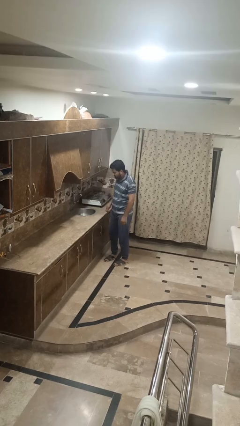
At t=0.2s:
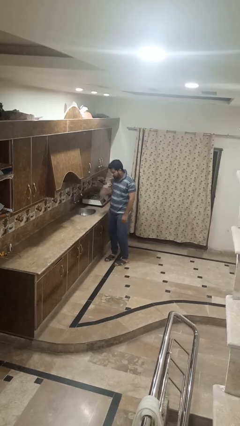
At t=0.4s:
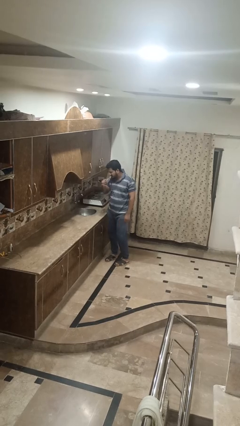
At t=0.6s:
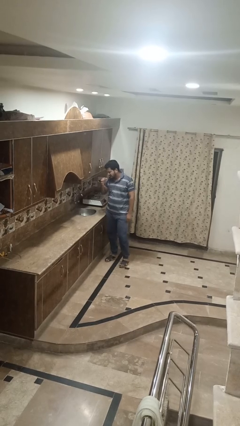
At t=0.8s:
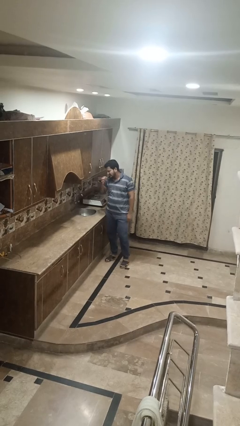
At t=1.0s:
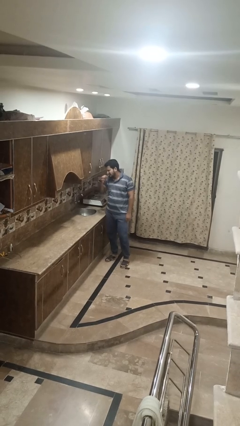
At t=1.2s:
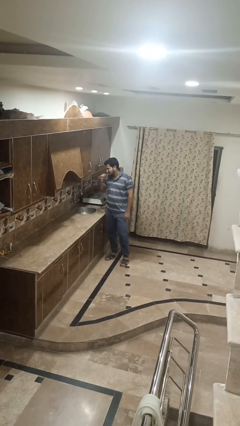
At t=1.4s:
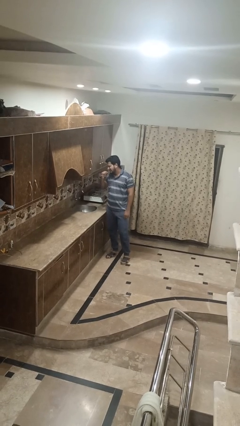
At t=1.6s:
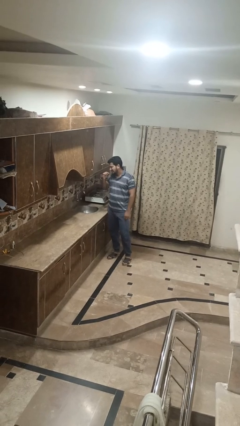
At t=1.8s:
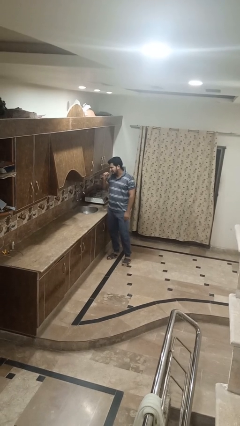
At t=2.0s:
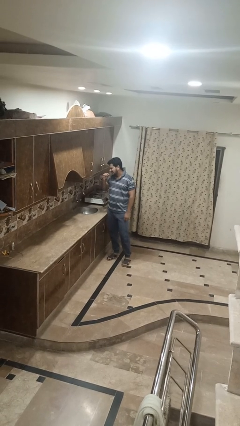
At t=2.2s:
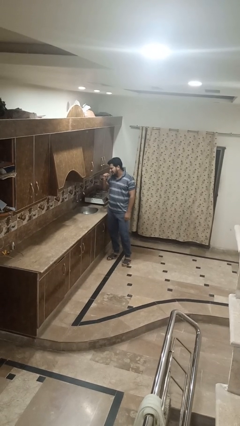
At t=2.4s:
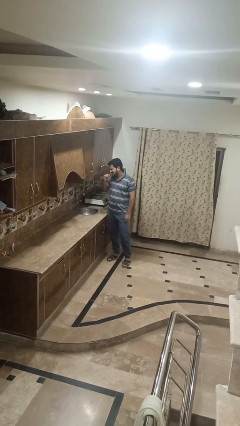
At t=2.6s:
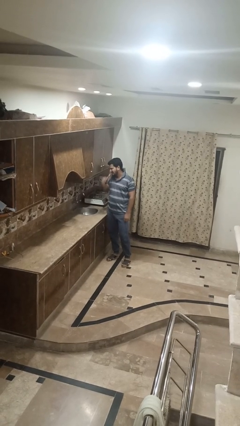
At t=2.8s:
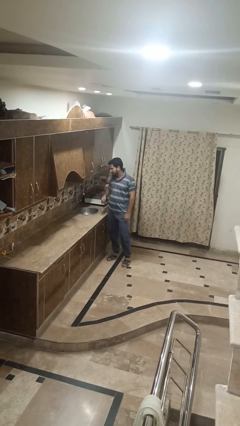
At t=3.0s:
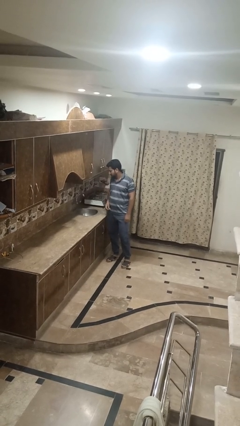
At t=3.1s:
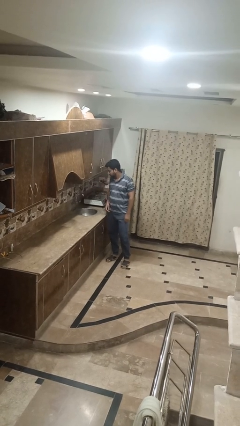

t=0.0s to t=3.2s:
person brushes teeth

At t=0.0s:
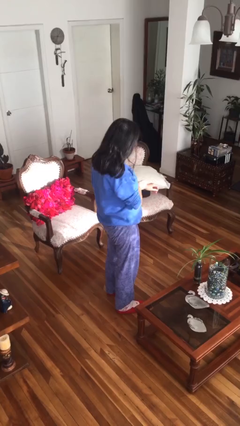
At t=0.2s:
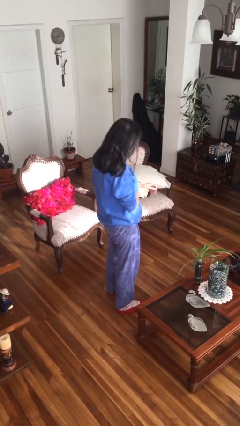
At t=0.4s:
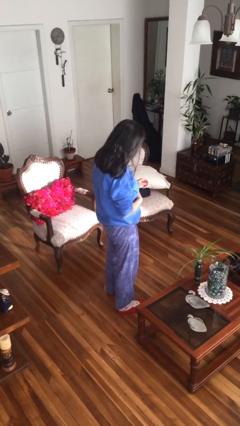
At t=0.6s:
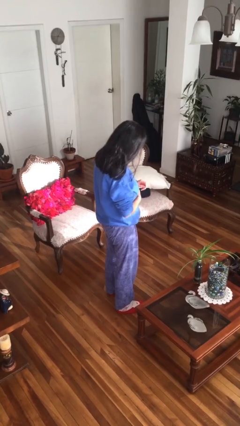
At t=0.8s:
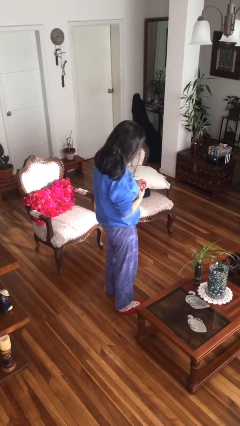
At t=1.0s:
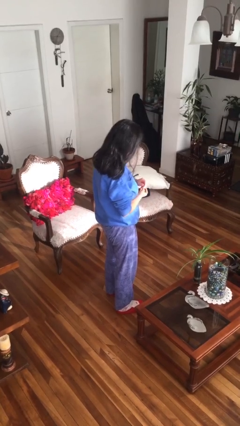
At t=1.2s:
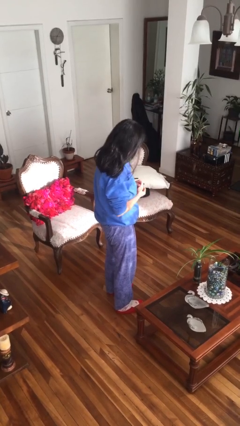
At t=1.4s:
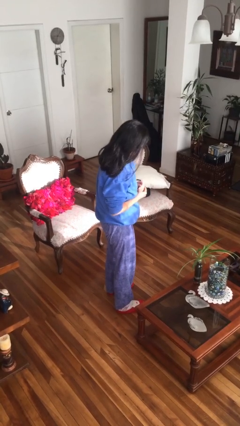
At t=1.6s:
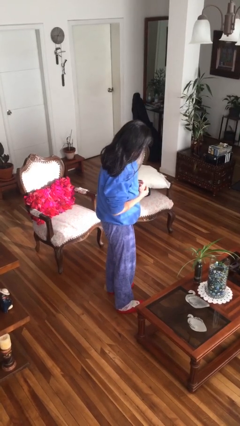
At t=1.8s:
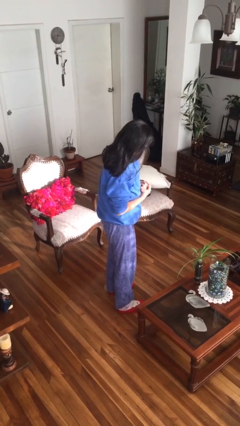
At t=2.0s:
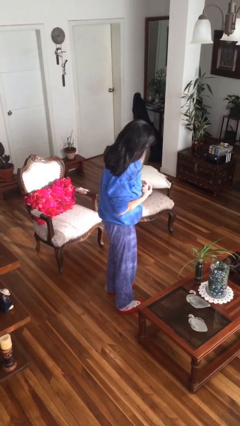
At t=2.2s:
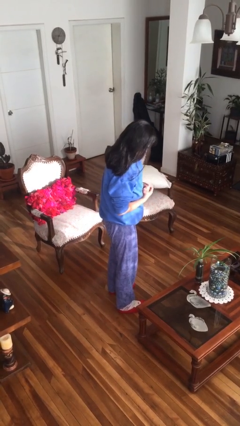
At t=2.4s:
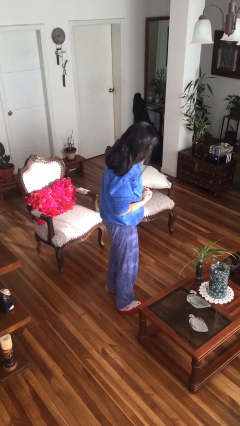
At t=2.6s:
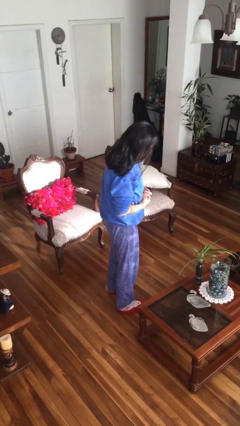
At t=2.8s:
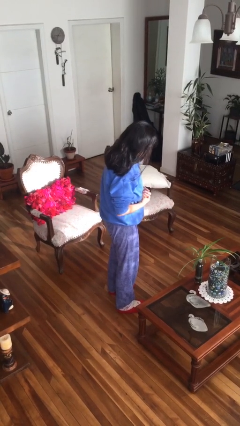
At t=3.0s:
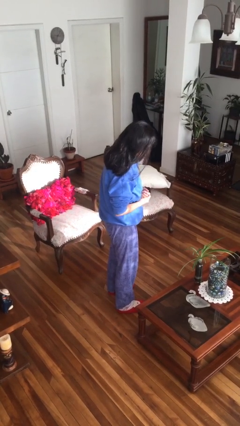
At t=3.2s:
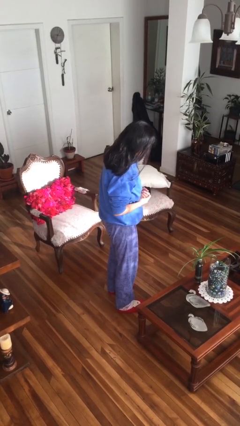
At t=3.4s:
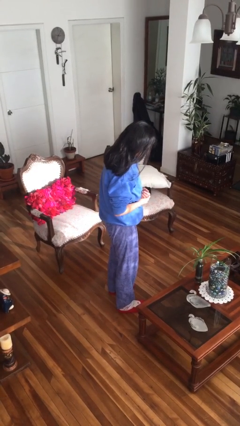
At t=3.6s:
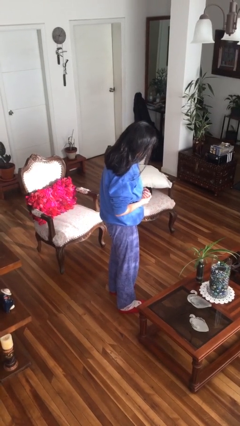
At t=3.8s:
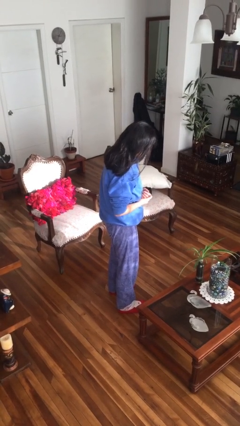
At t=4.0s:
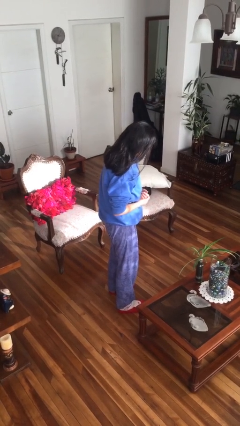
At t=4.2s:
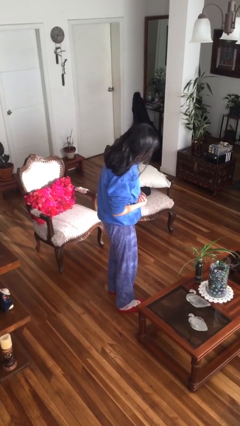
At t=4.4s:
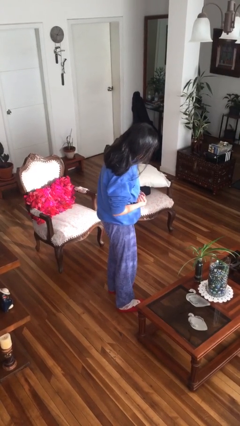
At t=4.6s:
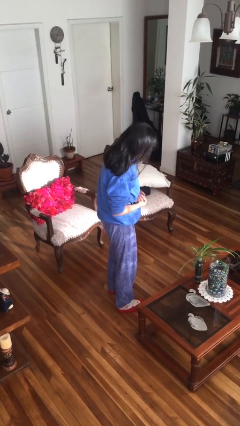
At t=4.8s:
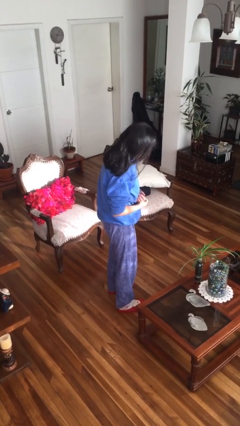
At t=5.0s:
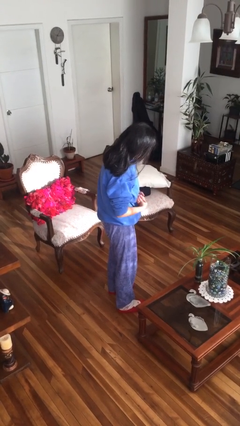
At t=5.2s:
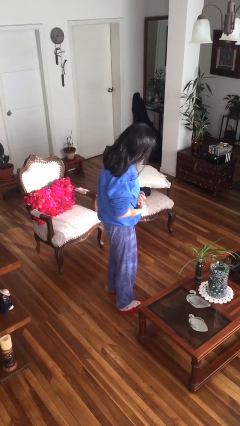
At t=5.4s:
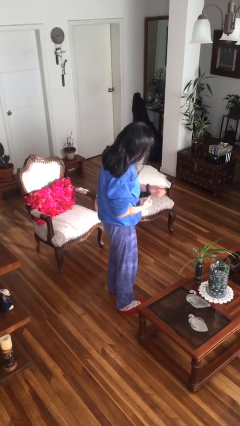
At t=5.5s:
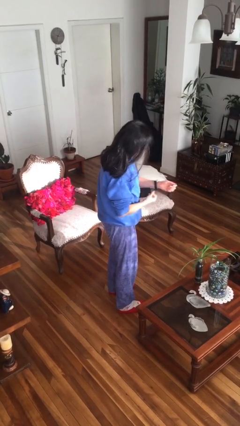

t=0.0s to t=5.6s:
person puts on wristwatch

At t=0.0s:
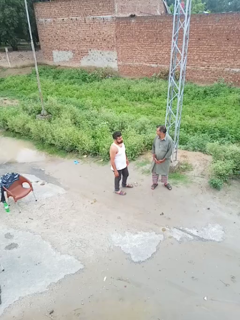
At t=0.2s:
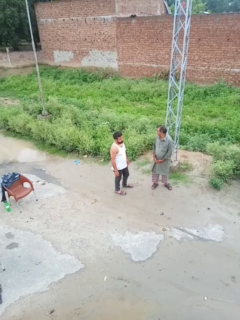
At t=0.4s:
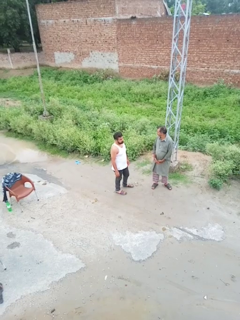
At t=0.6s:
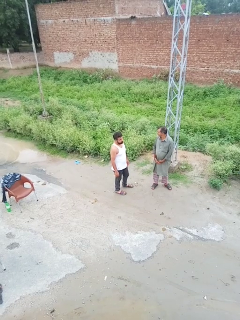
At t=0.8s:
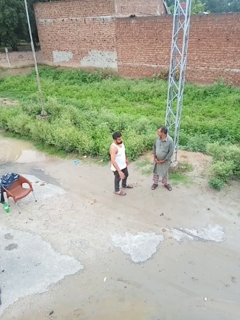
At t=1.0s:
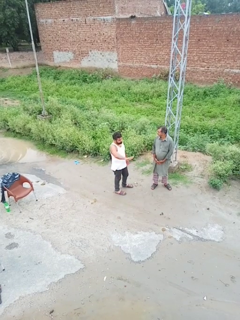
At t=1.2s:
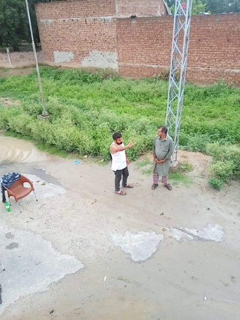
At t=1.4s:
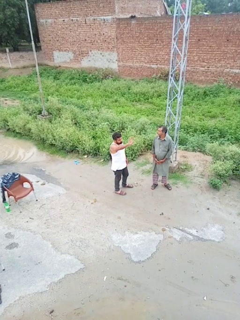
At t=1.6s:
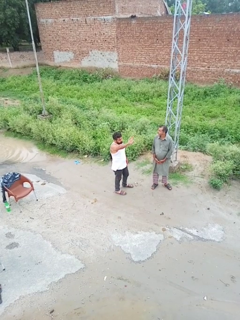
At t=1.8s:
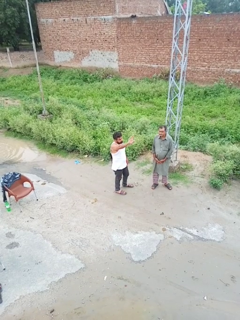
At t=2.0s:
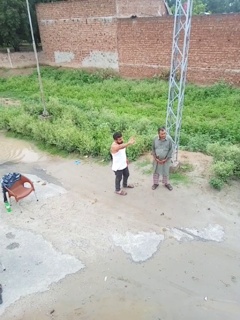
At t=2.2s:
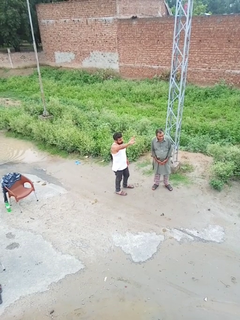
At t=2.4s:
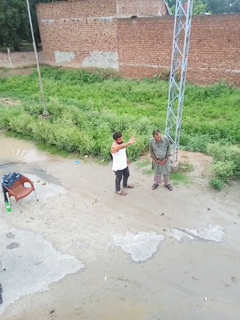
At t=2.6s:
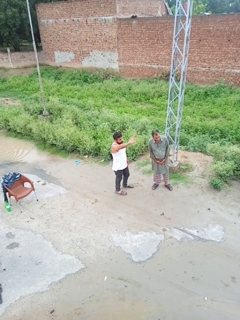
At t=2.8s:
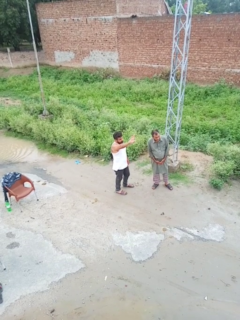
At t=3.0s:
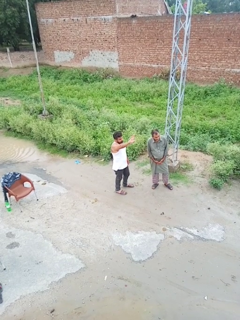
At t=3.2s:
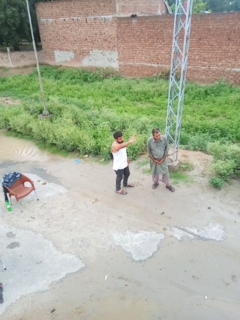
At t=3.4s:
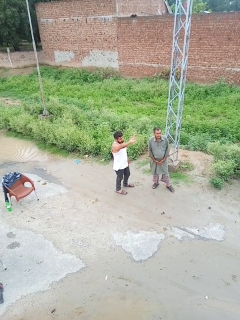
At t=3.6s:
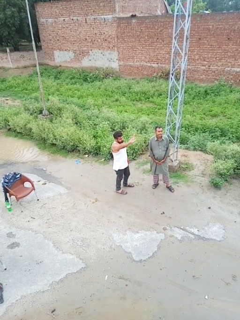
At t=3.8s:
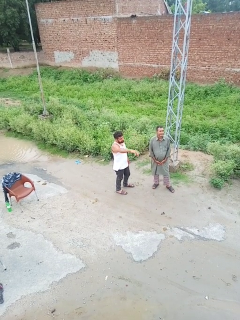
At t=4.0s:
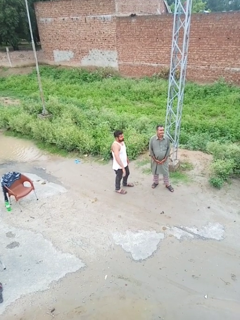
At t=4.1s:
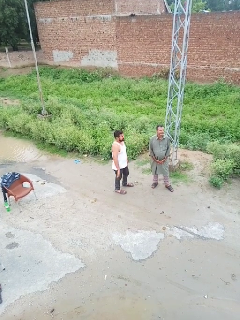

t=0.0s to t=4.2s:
person waves at person

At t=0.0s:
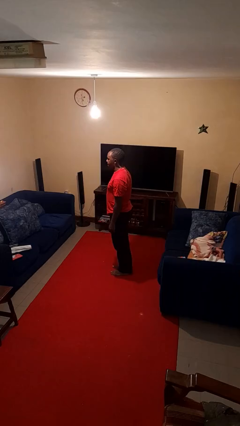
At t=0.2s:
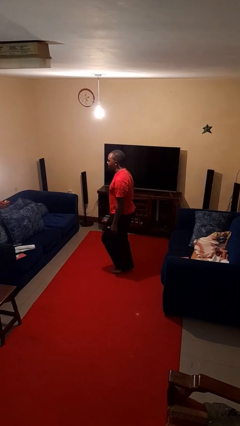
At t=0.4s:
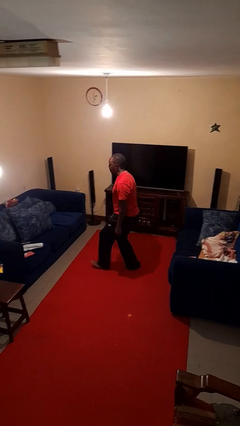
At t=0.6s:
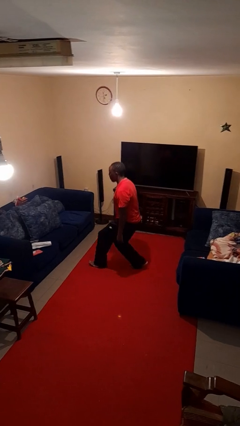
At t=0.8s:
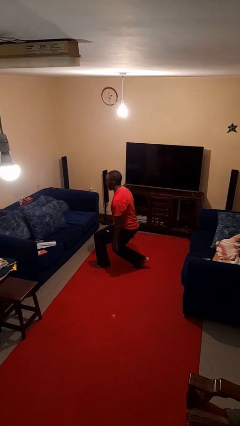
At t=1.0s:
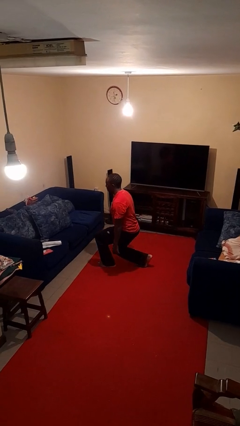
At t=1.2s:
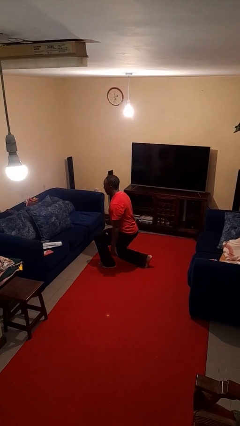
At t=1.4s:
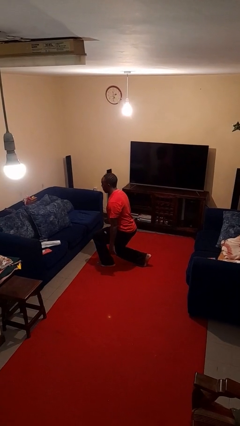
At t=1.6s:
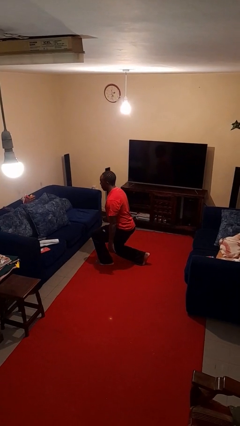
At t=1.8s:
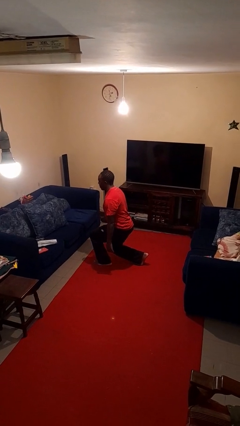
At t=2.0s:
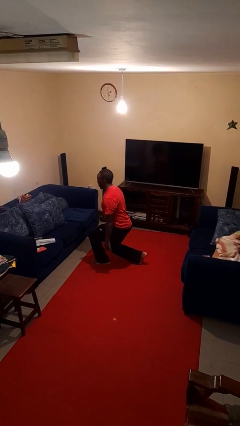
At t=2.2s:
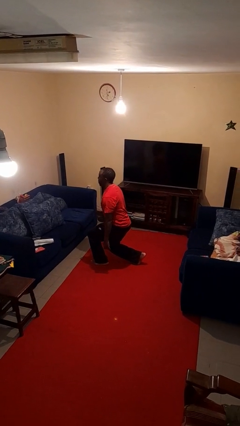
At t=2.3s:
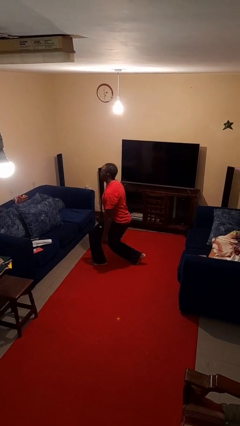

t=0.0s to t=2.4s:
person exercises with lunges

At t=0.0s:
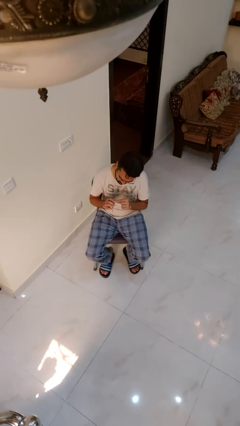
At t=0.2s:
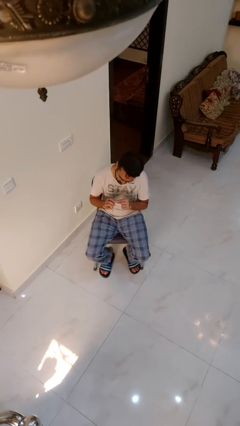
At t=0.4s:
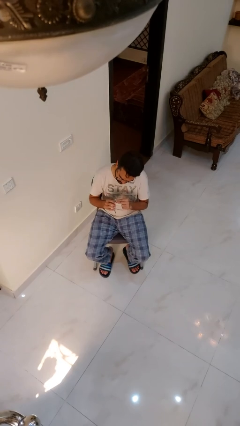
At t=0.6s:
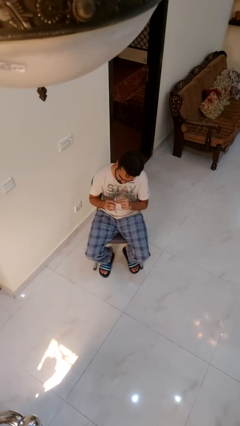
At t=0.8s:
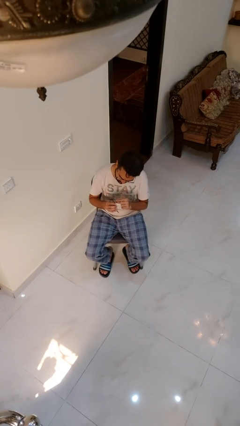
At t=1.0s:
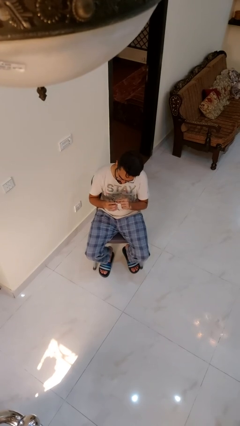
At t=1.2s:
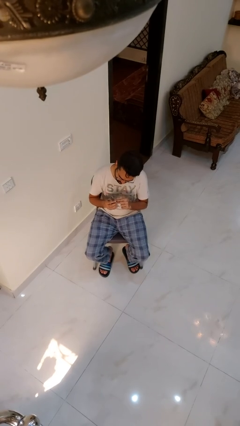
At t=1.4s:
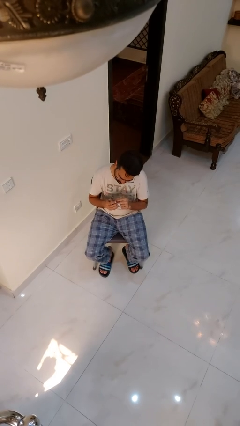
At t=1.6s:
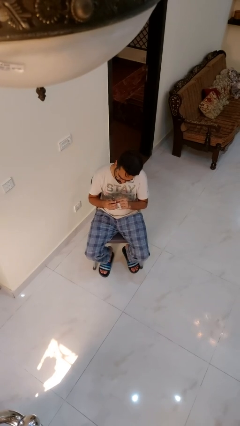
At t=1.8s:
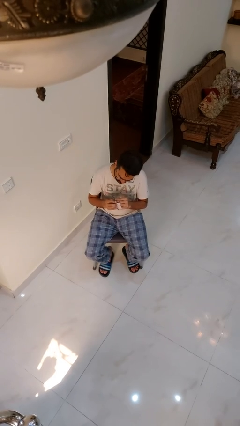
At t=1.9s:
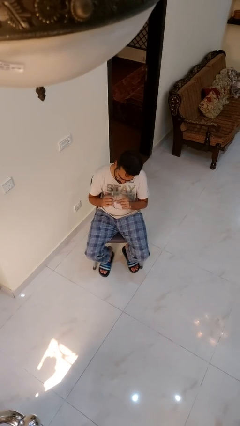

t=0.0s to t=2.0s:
person files fingernails

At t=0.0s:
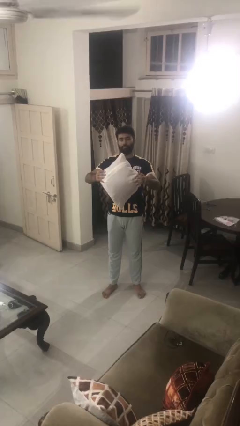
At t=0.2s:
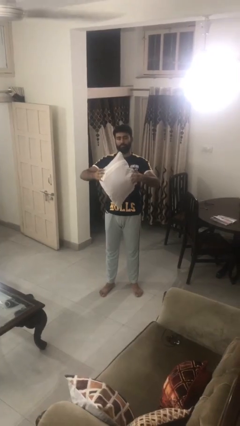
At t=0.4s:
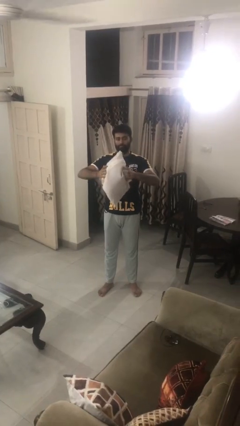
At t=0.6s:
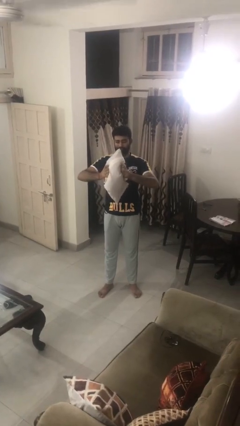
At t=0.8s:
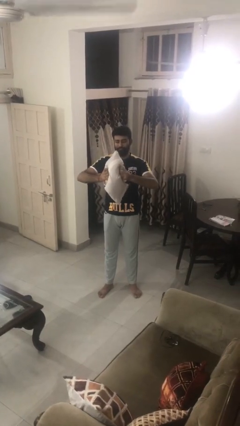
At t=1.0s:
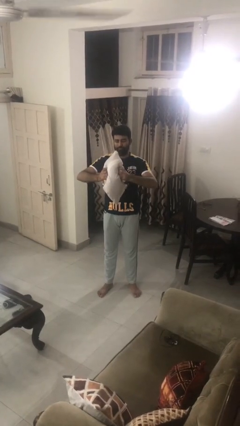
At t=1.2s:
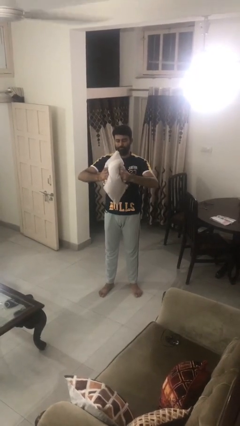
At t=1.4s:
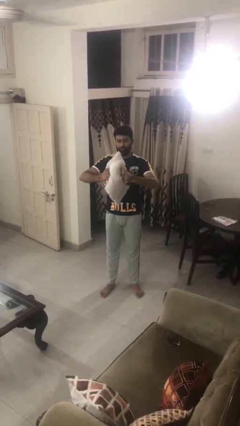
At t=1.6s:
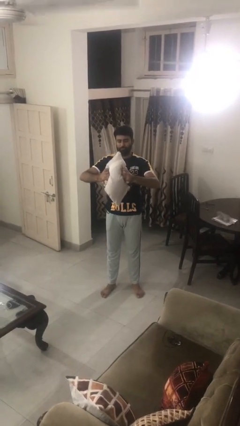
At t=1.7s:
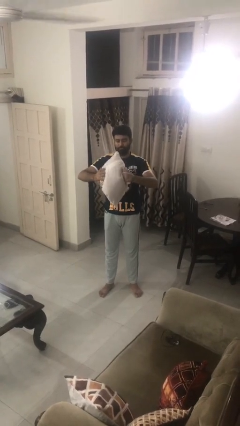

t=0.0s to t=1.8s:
person squeezes object
